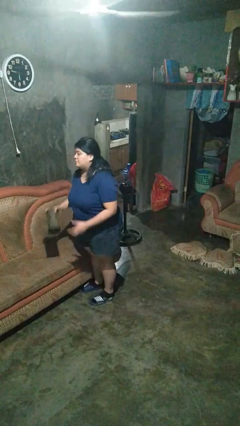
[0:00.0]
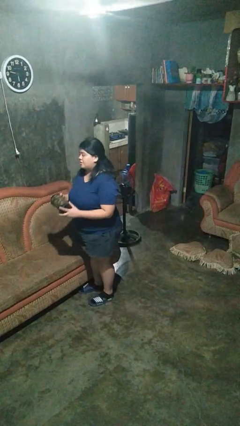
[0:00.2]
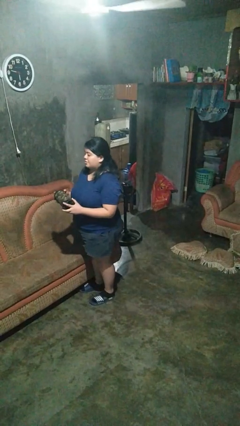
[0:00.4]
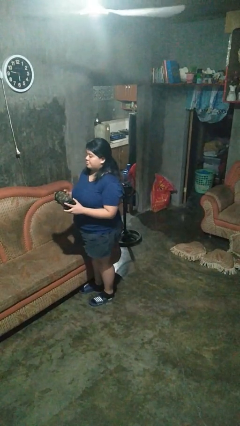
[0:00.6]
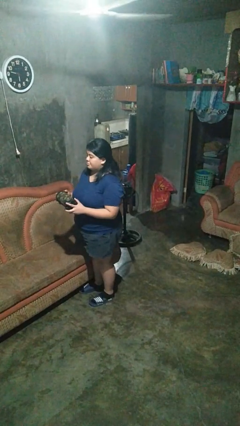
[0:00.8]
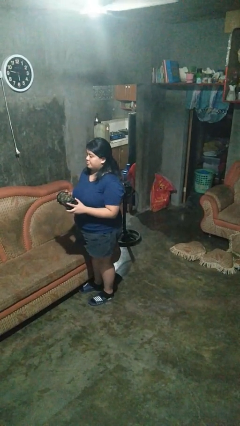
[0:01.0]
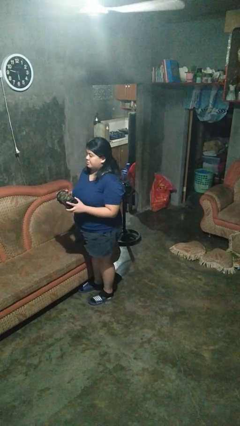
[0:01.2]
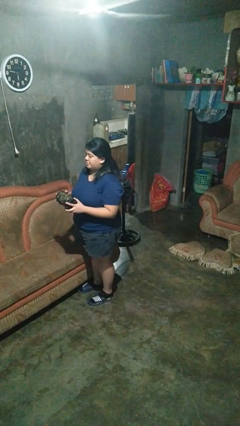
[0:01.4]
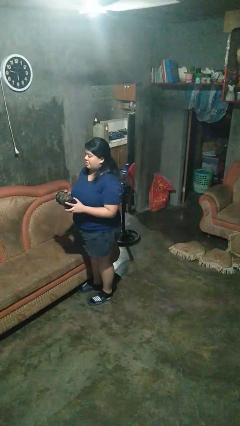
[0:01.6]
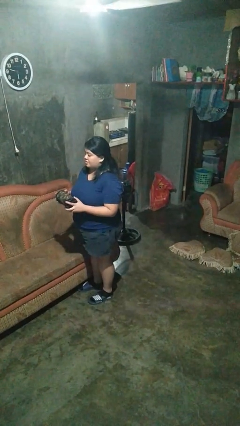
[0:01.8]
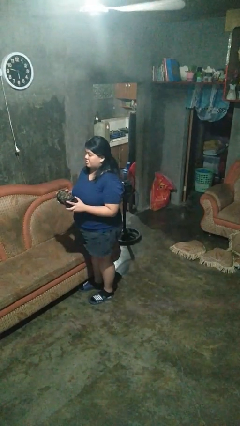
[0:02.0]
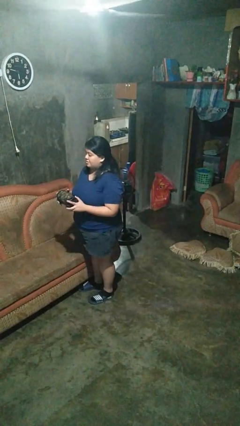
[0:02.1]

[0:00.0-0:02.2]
person picks up object from couch

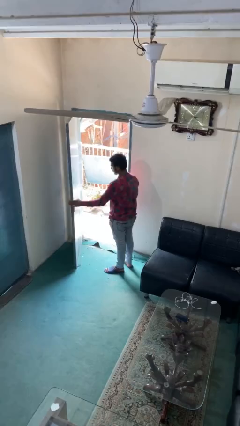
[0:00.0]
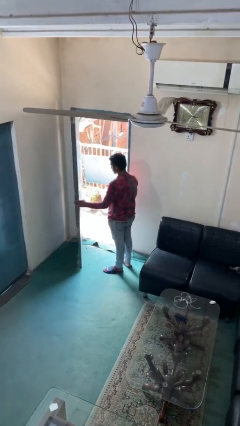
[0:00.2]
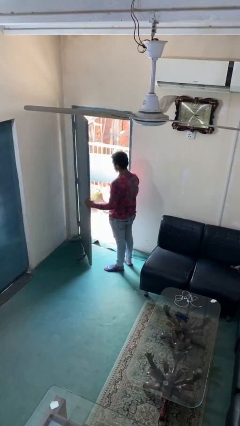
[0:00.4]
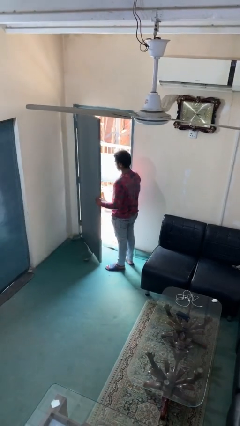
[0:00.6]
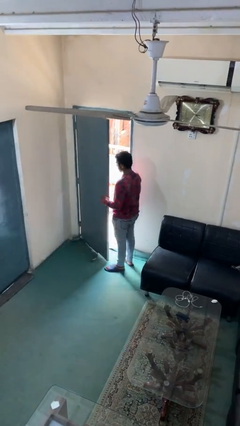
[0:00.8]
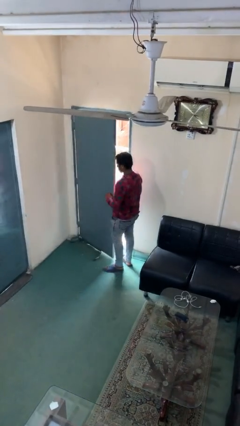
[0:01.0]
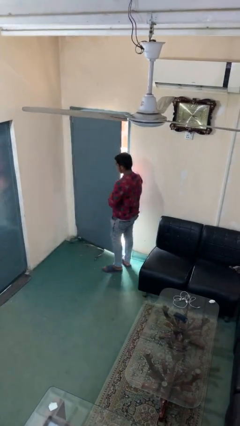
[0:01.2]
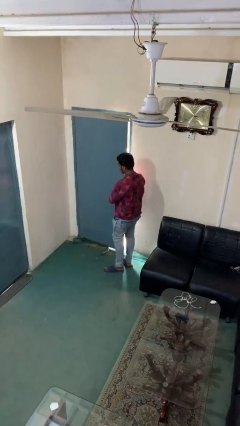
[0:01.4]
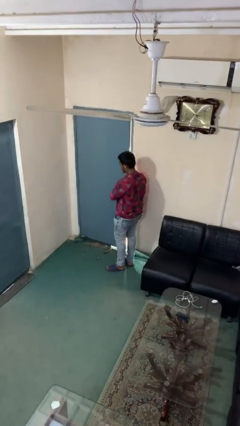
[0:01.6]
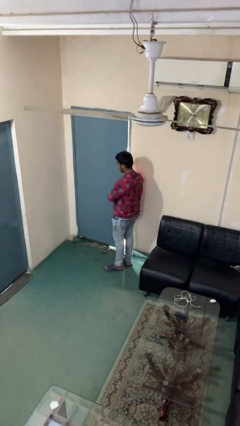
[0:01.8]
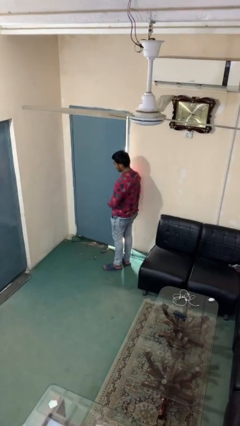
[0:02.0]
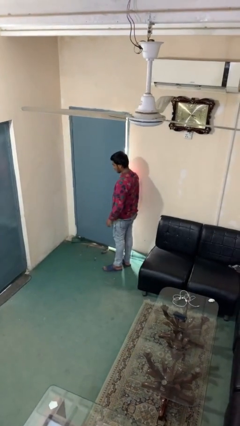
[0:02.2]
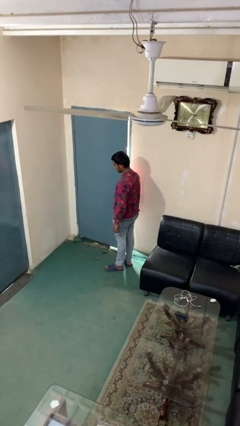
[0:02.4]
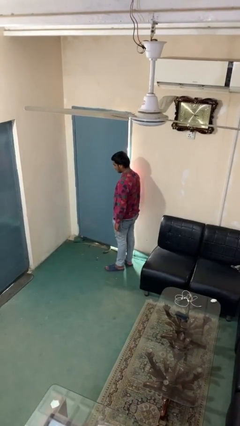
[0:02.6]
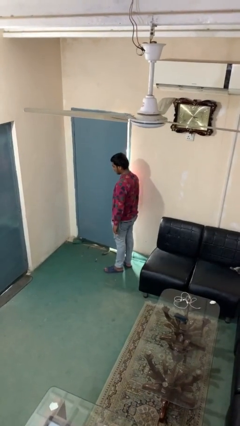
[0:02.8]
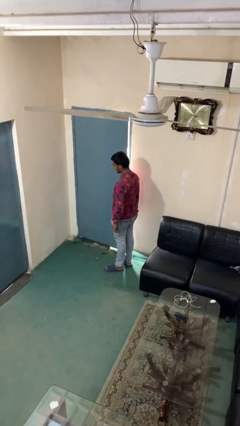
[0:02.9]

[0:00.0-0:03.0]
person closes facility door

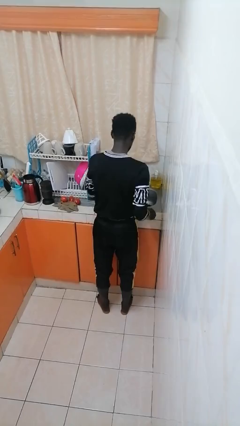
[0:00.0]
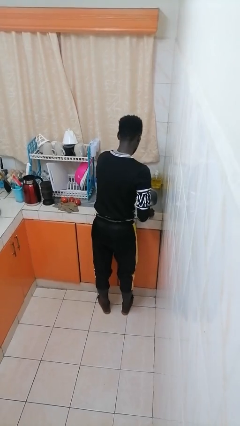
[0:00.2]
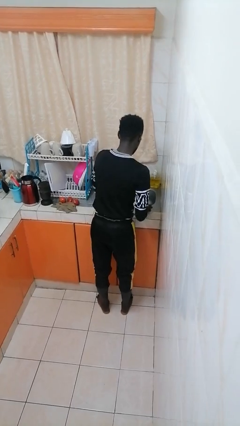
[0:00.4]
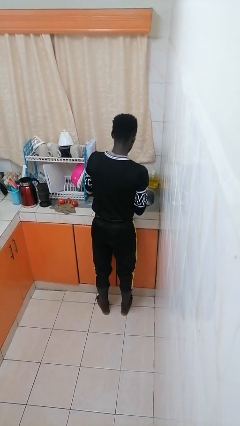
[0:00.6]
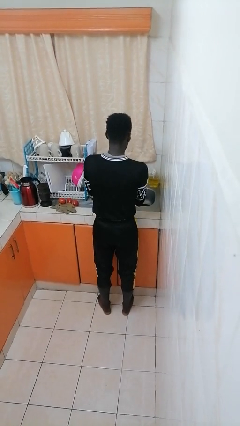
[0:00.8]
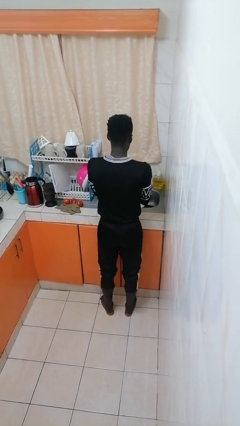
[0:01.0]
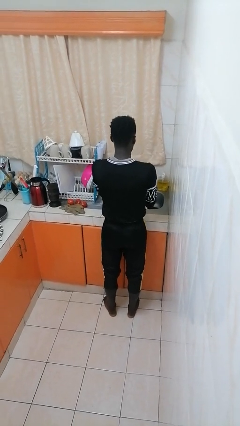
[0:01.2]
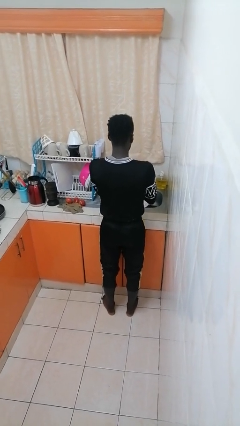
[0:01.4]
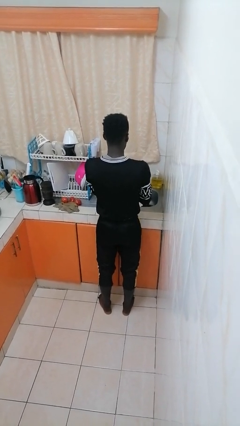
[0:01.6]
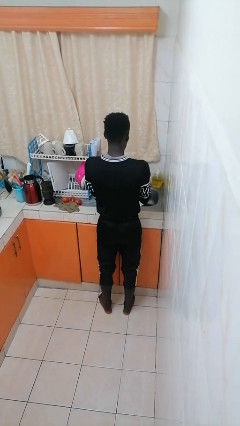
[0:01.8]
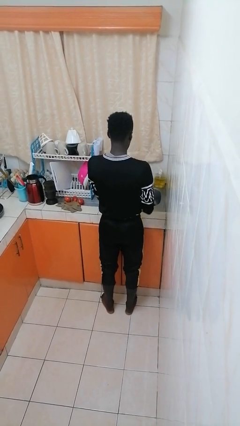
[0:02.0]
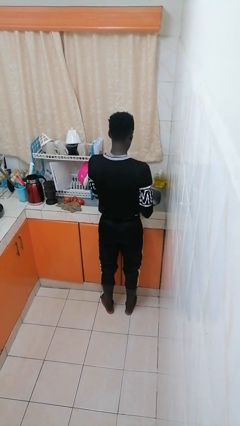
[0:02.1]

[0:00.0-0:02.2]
person washes dish

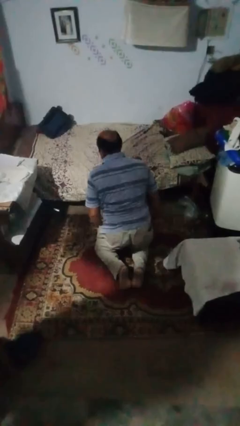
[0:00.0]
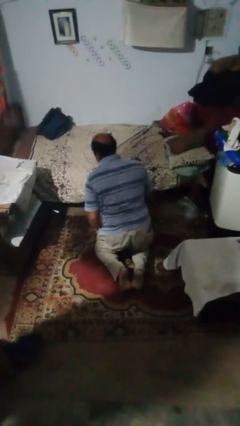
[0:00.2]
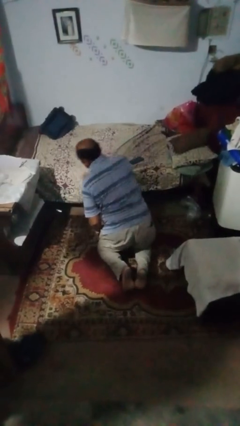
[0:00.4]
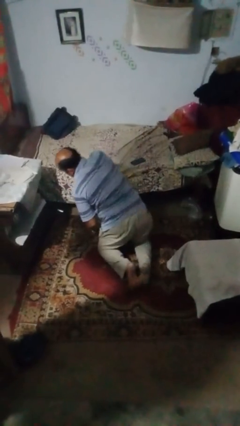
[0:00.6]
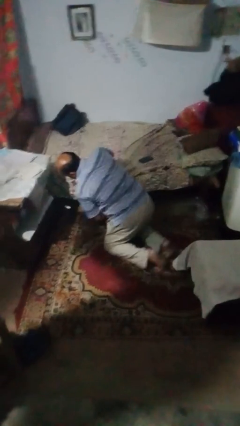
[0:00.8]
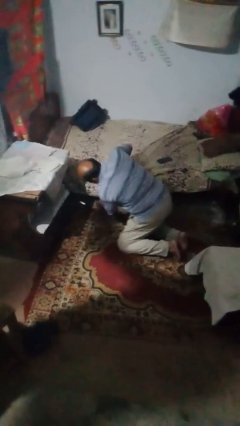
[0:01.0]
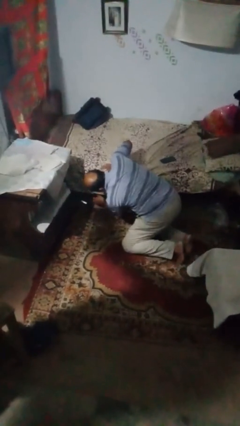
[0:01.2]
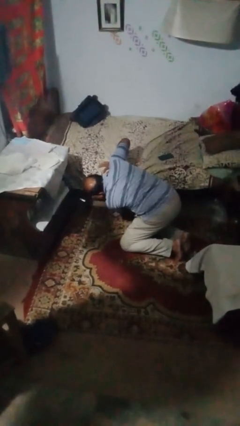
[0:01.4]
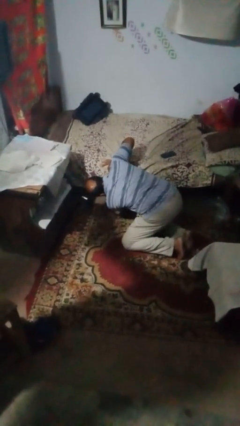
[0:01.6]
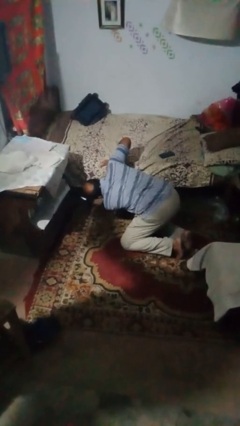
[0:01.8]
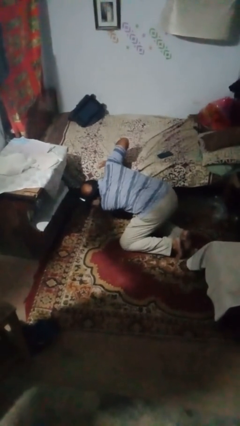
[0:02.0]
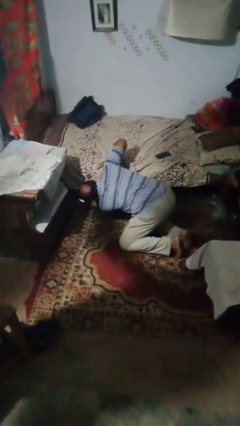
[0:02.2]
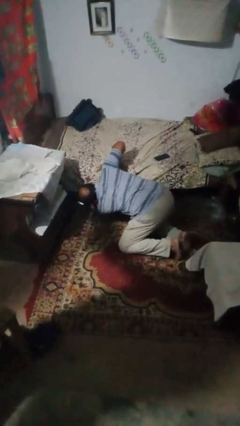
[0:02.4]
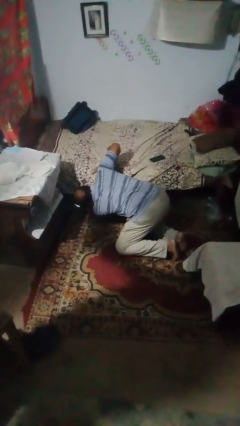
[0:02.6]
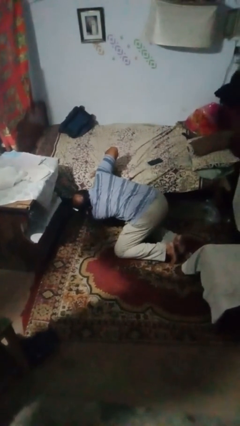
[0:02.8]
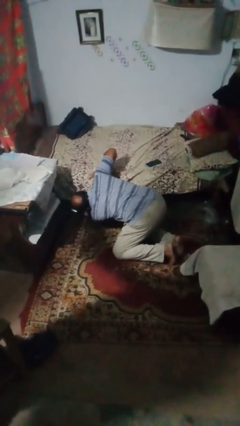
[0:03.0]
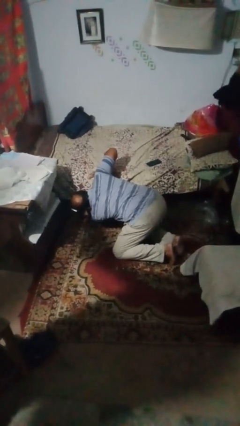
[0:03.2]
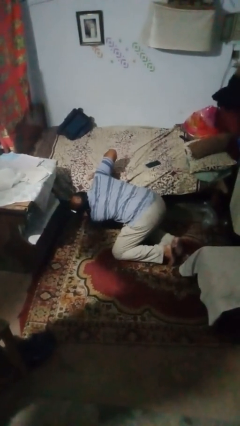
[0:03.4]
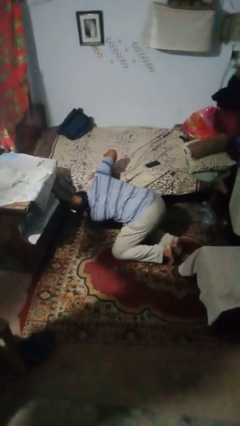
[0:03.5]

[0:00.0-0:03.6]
person searches under bed

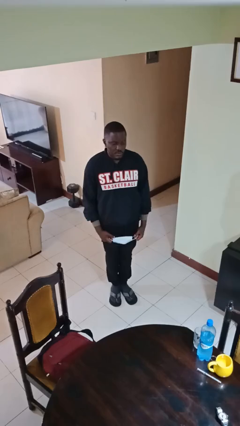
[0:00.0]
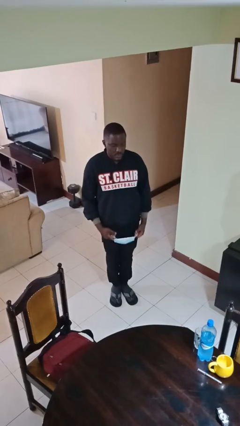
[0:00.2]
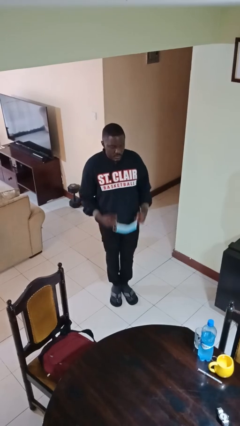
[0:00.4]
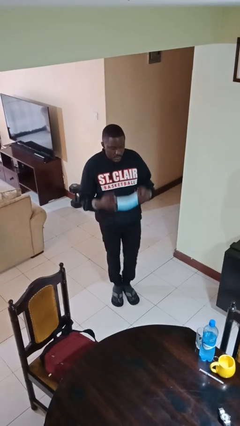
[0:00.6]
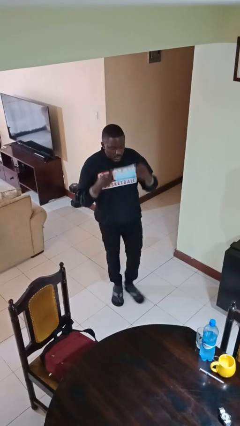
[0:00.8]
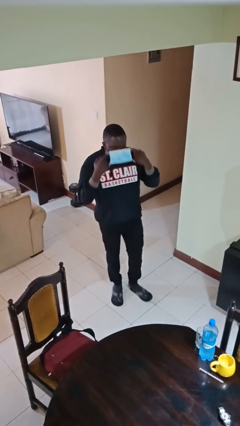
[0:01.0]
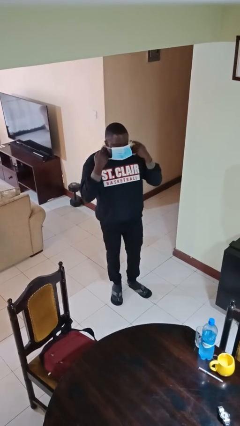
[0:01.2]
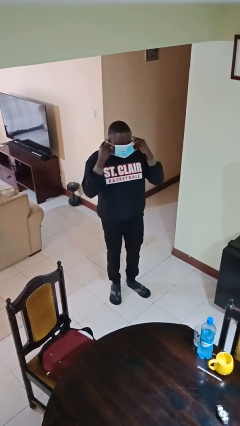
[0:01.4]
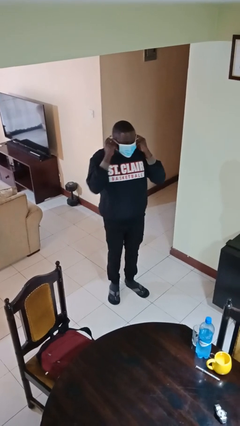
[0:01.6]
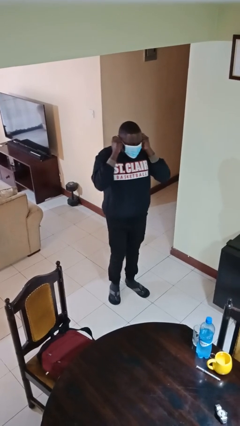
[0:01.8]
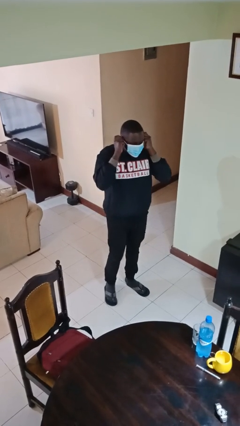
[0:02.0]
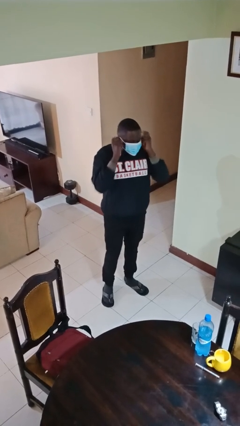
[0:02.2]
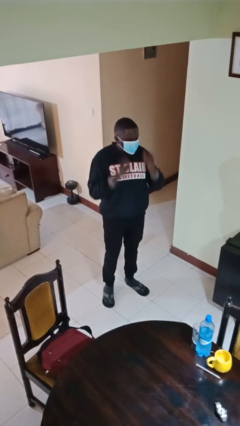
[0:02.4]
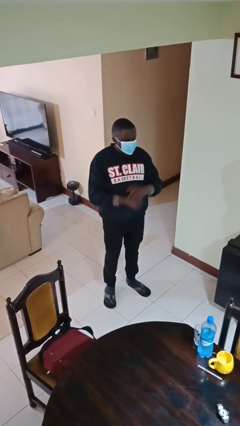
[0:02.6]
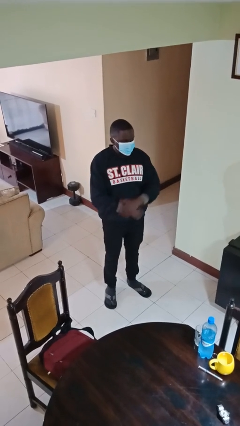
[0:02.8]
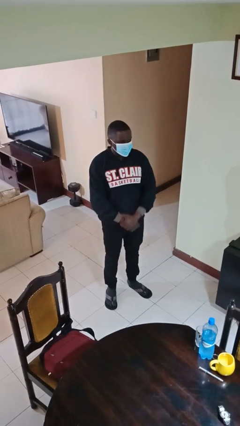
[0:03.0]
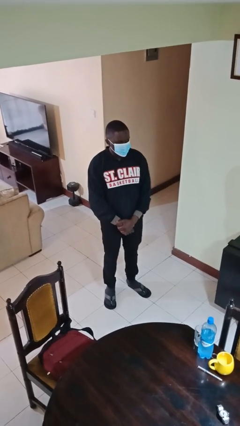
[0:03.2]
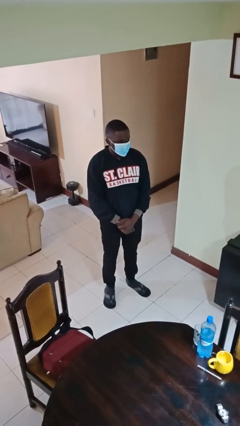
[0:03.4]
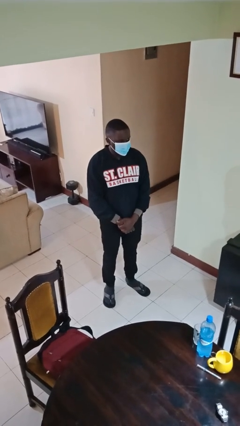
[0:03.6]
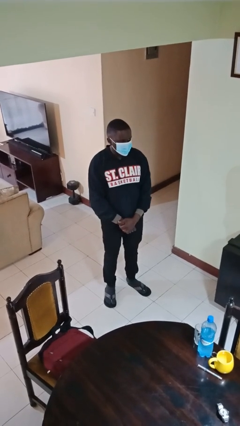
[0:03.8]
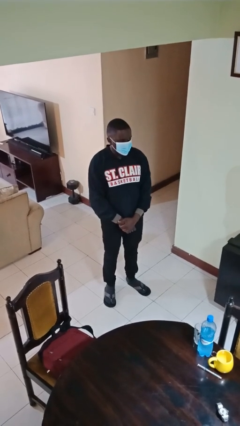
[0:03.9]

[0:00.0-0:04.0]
person puts on facemask

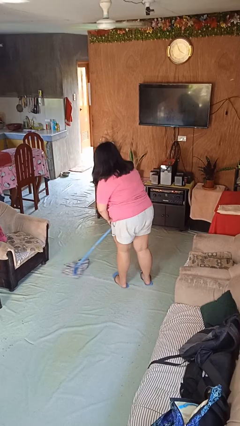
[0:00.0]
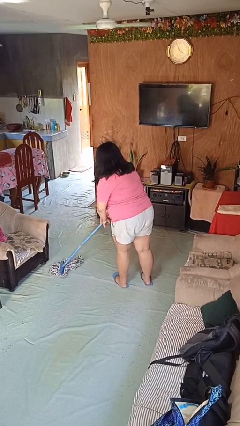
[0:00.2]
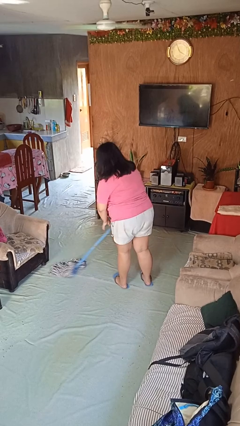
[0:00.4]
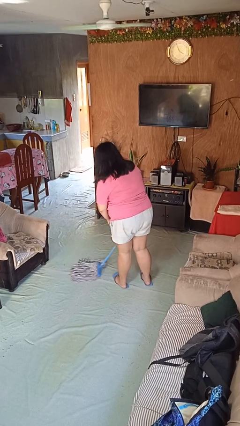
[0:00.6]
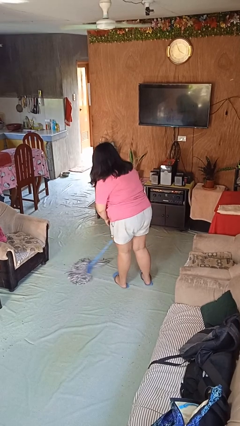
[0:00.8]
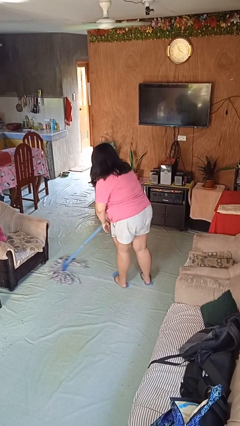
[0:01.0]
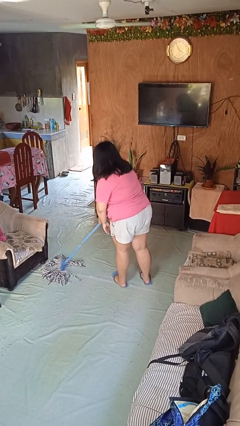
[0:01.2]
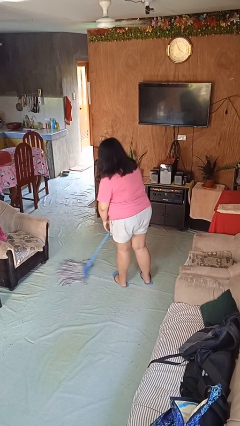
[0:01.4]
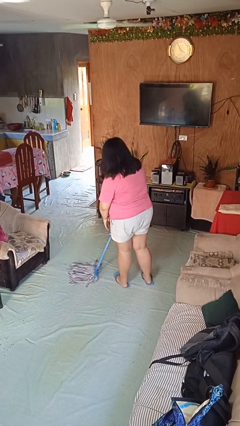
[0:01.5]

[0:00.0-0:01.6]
person mops

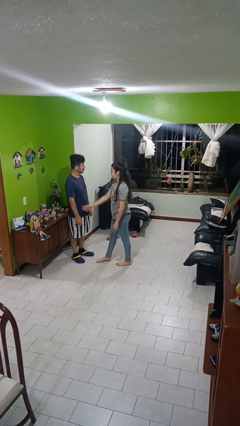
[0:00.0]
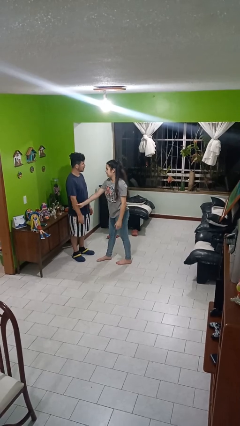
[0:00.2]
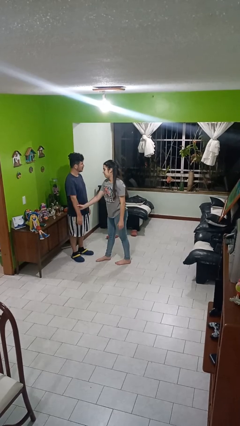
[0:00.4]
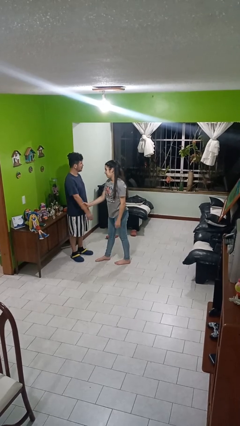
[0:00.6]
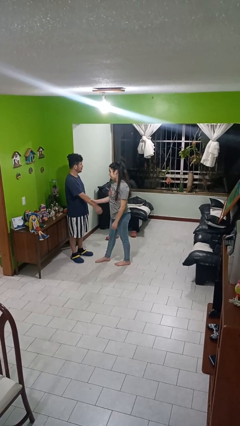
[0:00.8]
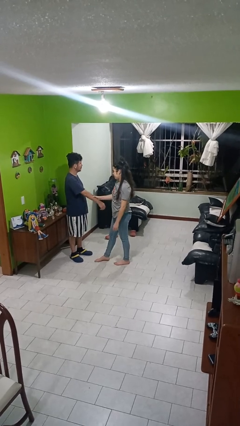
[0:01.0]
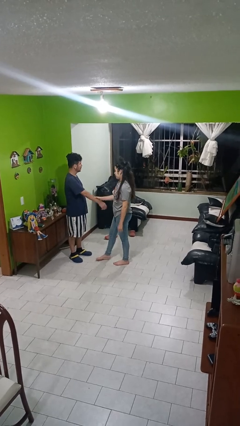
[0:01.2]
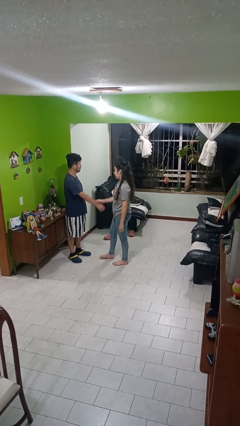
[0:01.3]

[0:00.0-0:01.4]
person grabs person by forearm
